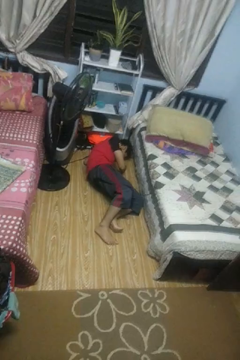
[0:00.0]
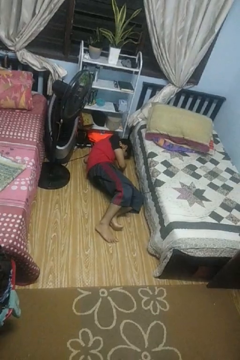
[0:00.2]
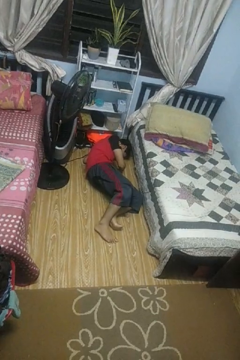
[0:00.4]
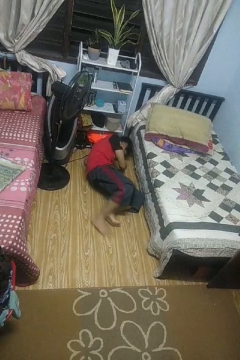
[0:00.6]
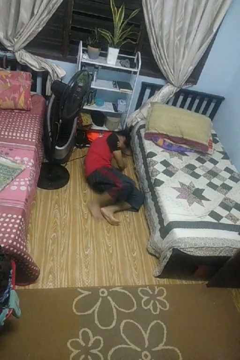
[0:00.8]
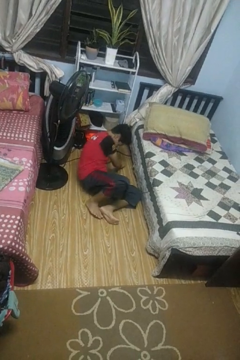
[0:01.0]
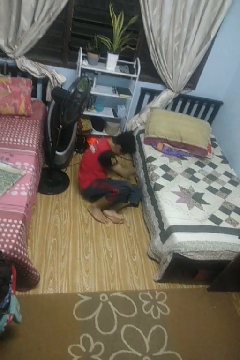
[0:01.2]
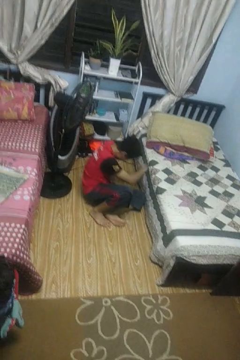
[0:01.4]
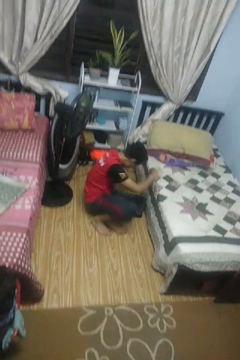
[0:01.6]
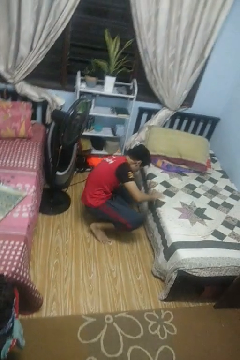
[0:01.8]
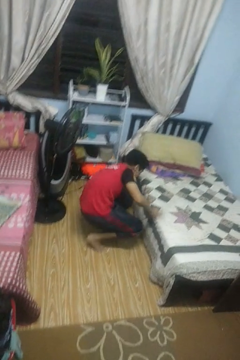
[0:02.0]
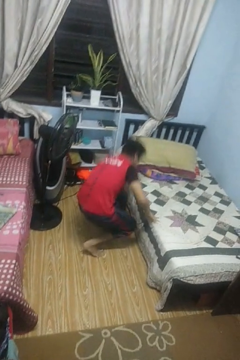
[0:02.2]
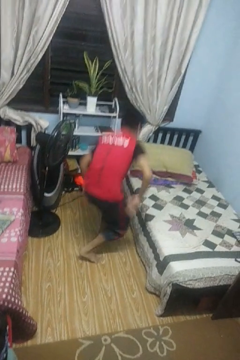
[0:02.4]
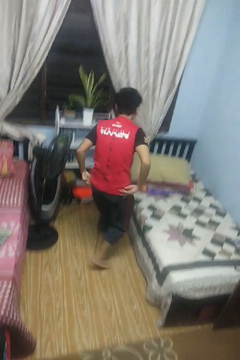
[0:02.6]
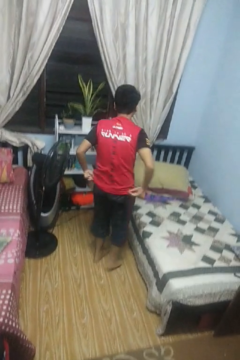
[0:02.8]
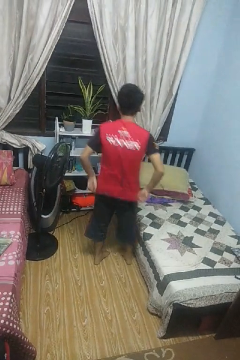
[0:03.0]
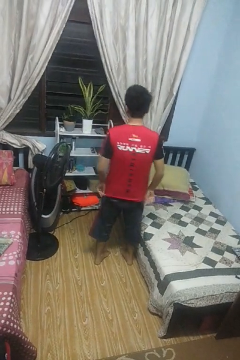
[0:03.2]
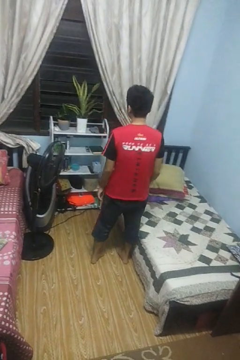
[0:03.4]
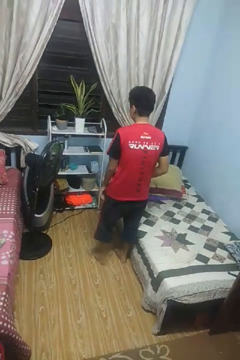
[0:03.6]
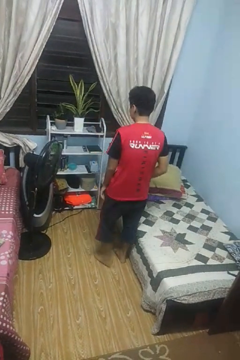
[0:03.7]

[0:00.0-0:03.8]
person stands up from floor

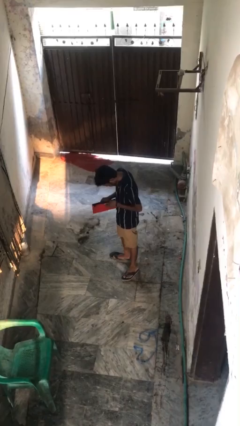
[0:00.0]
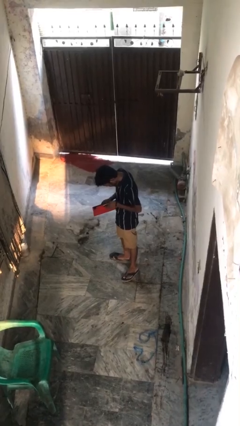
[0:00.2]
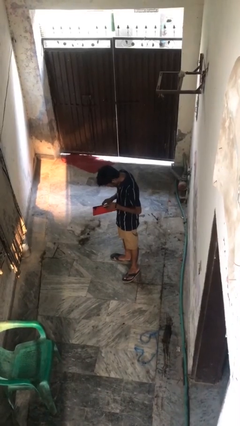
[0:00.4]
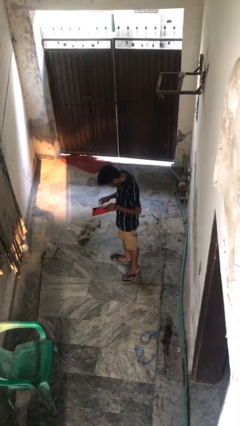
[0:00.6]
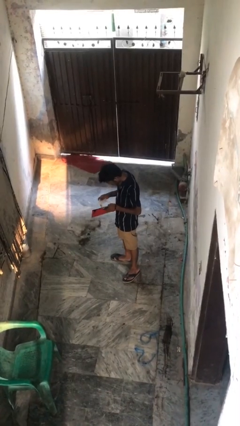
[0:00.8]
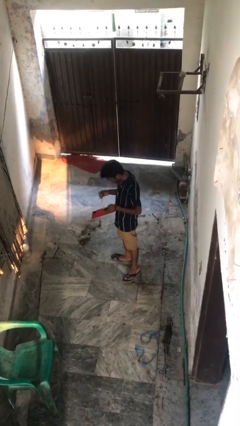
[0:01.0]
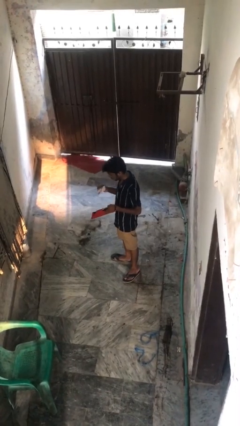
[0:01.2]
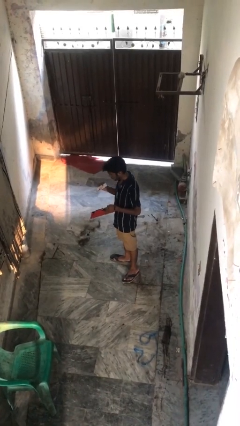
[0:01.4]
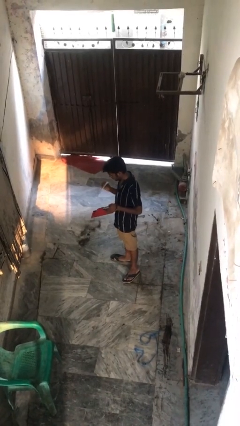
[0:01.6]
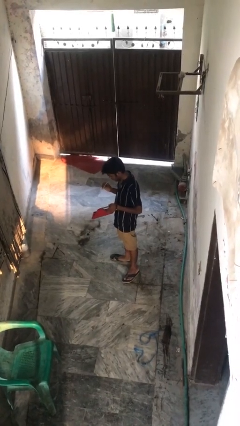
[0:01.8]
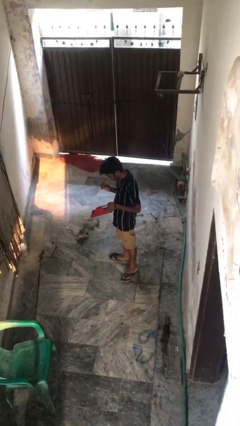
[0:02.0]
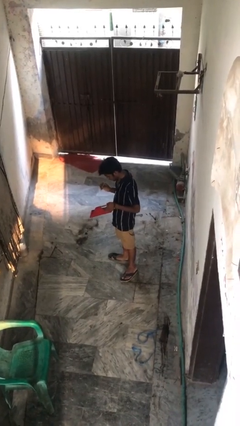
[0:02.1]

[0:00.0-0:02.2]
person takes object from purse

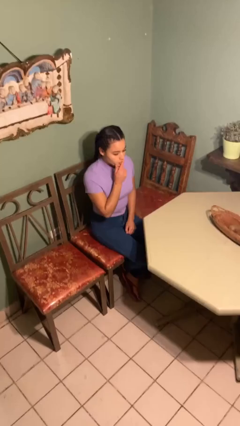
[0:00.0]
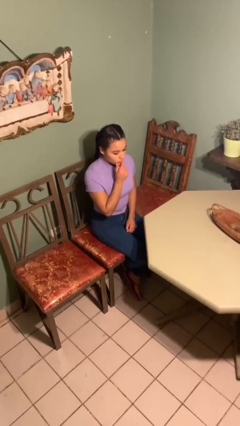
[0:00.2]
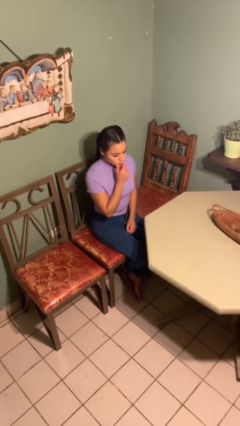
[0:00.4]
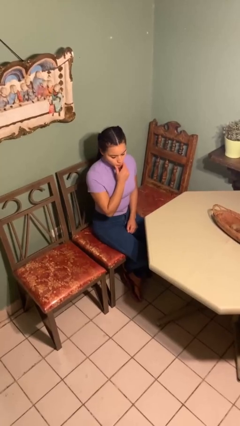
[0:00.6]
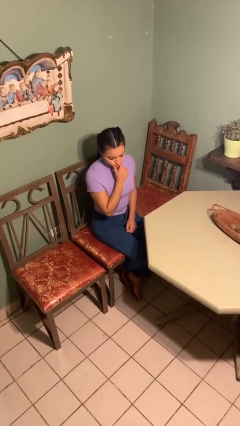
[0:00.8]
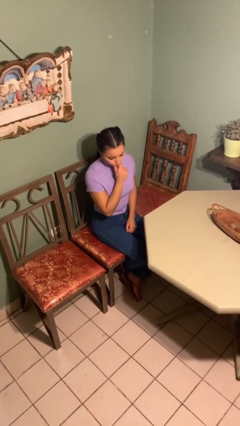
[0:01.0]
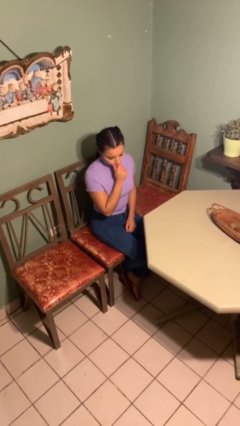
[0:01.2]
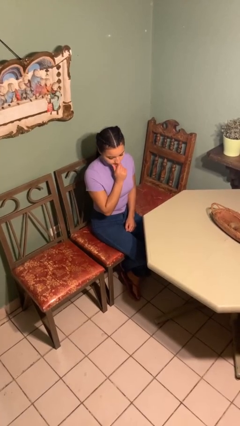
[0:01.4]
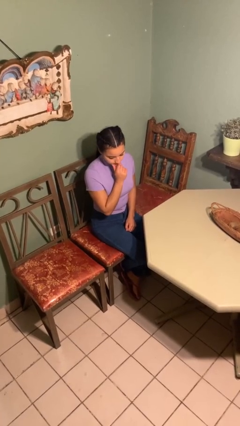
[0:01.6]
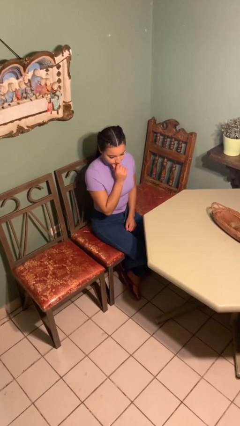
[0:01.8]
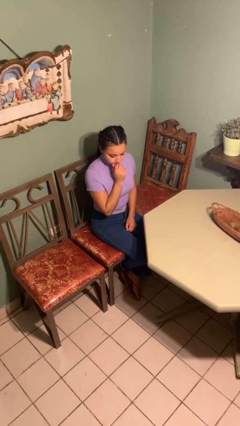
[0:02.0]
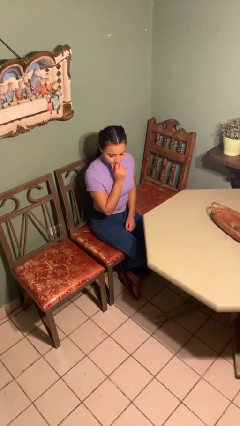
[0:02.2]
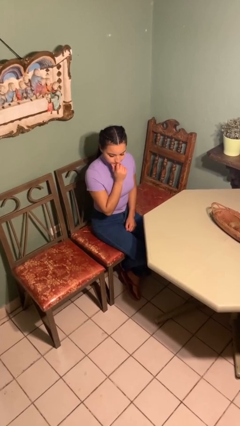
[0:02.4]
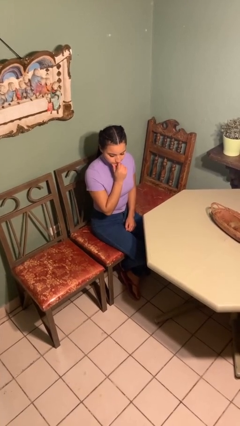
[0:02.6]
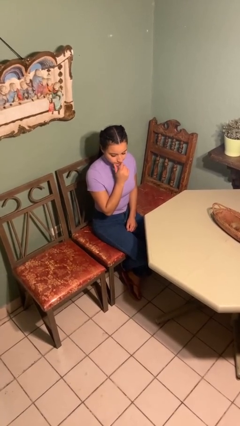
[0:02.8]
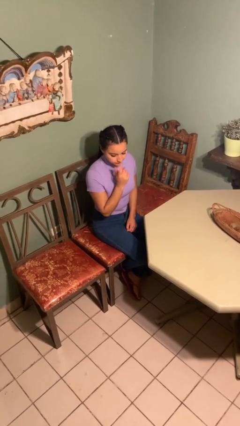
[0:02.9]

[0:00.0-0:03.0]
person strokes chin

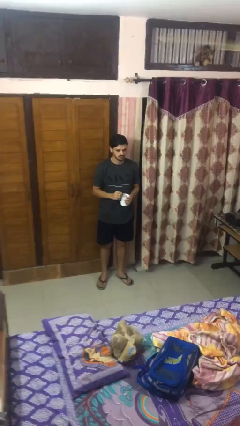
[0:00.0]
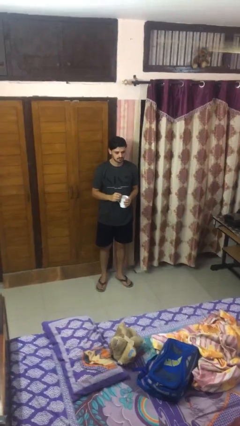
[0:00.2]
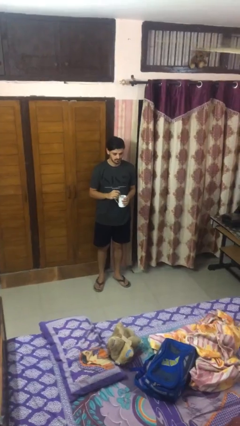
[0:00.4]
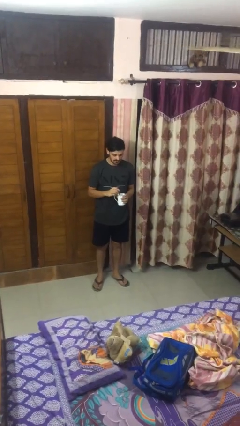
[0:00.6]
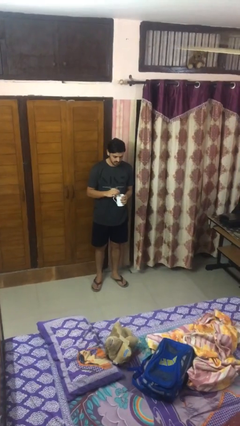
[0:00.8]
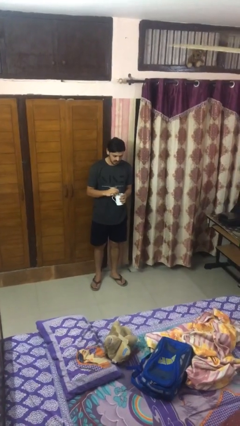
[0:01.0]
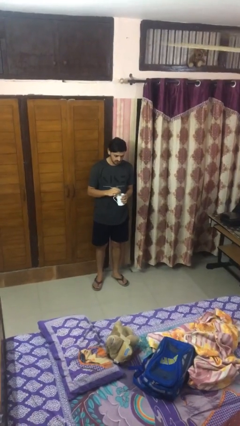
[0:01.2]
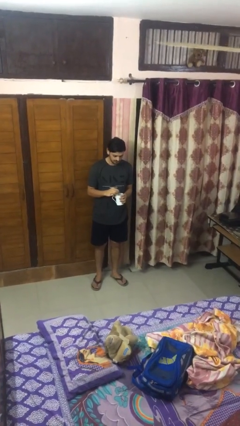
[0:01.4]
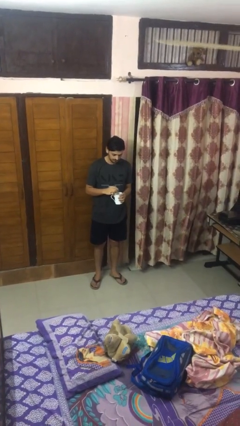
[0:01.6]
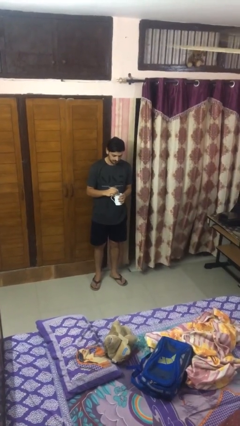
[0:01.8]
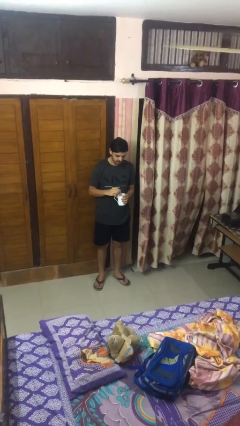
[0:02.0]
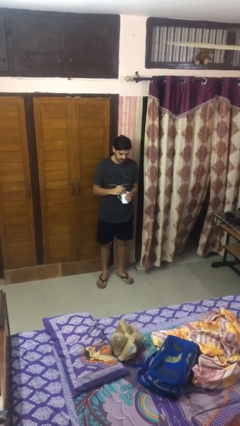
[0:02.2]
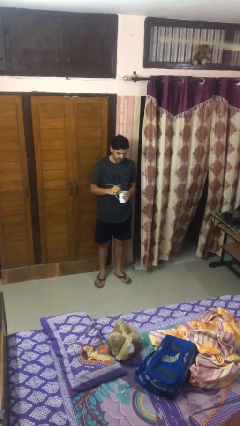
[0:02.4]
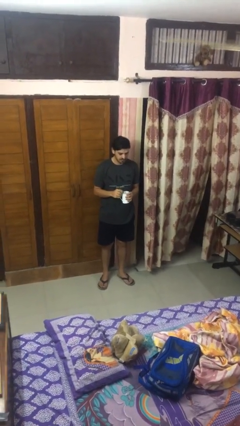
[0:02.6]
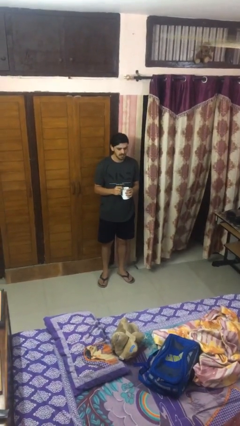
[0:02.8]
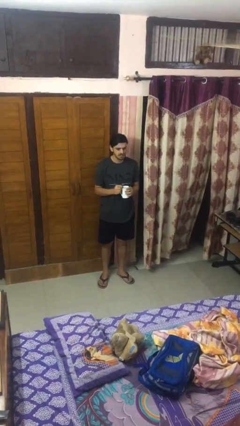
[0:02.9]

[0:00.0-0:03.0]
person stirs mug

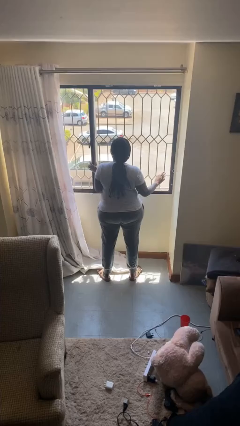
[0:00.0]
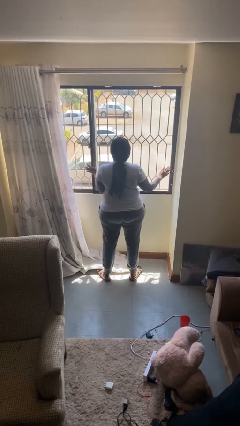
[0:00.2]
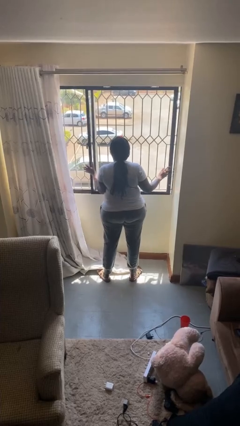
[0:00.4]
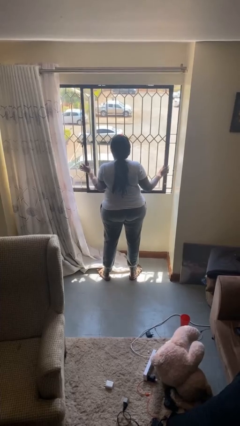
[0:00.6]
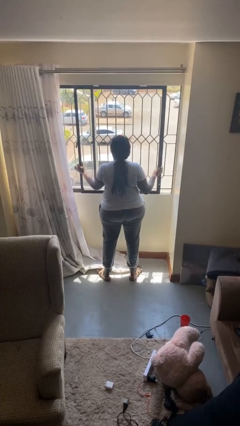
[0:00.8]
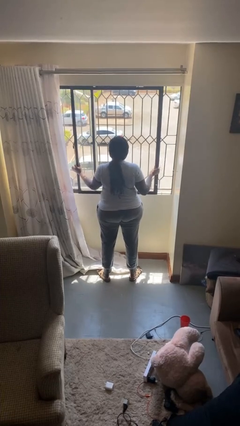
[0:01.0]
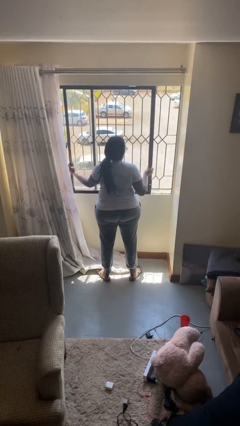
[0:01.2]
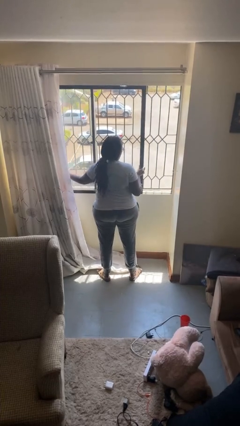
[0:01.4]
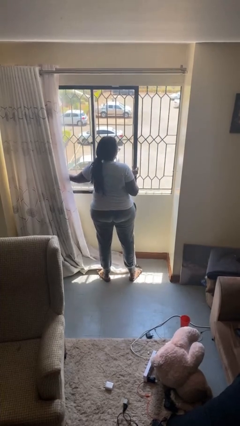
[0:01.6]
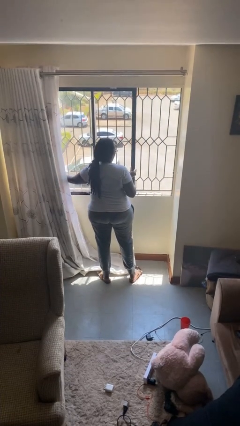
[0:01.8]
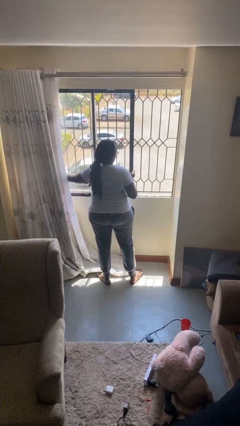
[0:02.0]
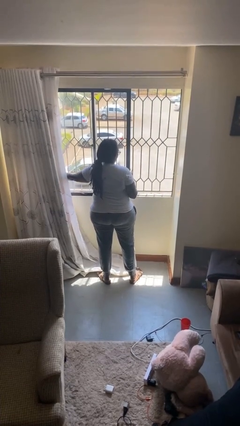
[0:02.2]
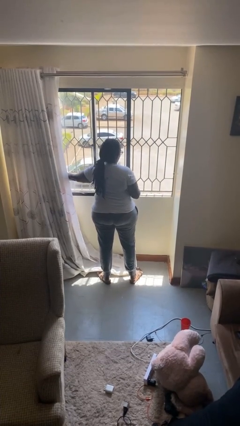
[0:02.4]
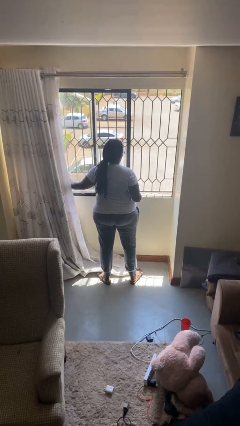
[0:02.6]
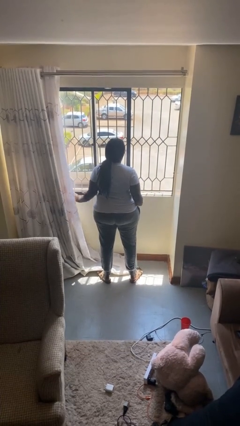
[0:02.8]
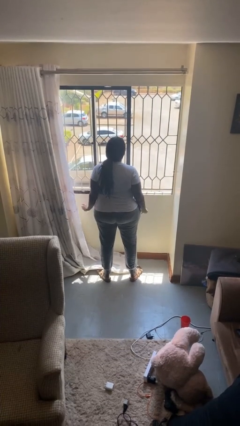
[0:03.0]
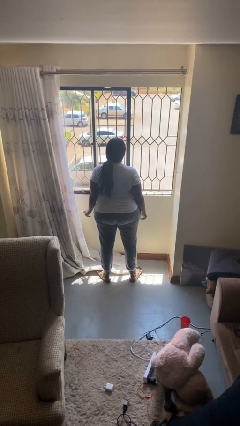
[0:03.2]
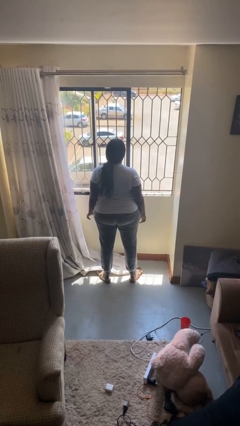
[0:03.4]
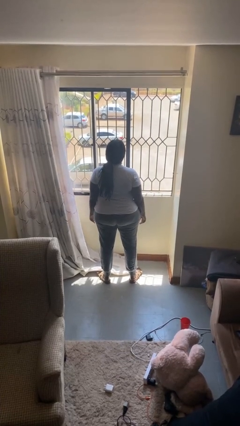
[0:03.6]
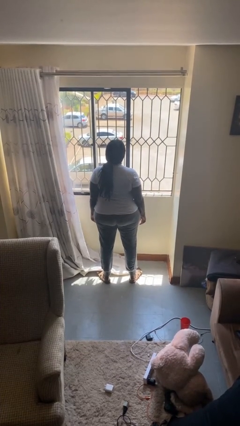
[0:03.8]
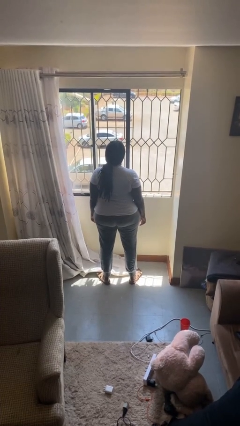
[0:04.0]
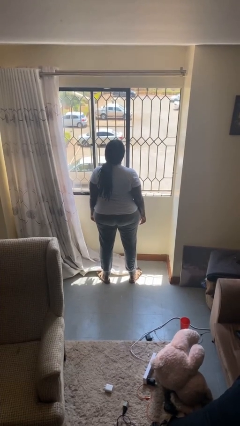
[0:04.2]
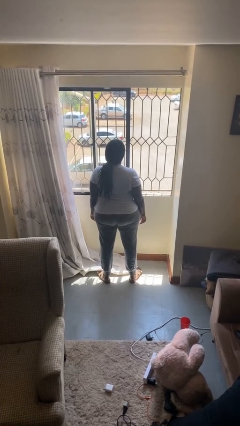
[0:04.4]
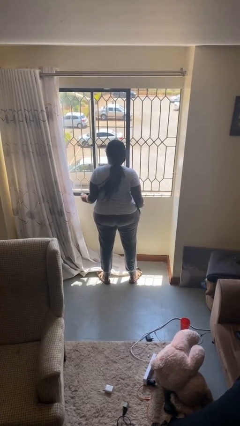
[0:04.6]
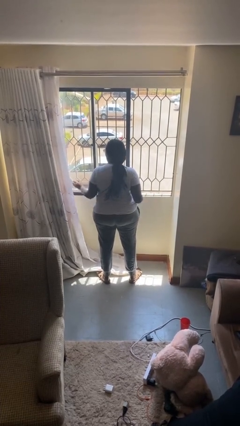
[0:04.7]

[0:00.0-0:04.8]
person opens home window

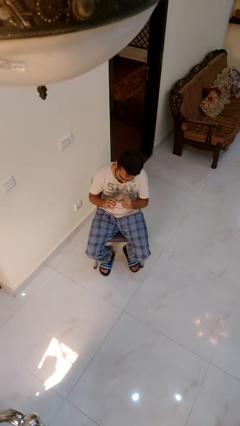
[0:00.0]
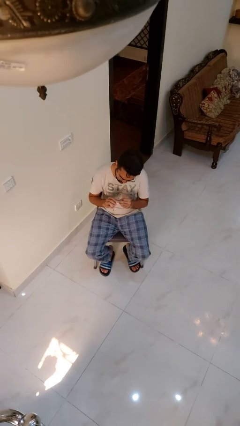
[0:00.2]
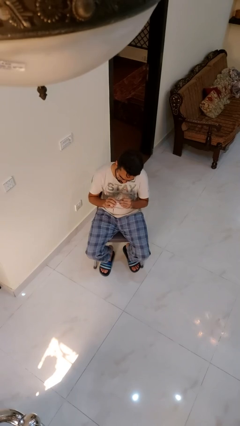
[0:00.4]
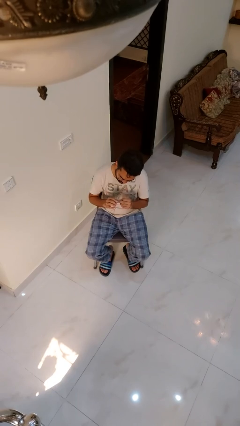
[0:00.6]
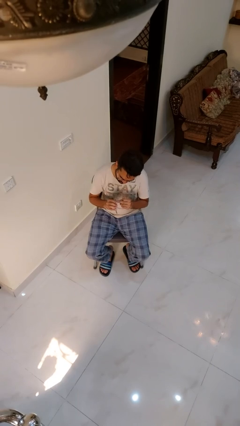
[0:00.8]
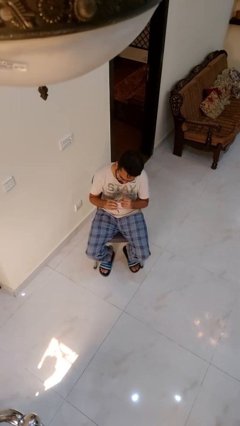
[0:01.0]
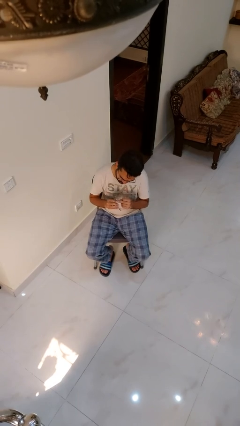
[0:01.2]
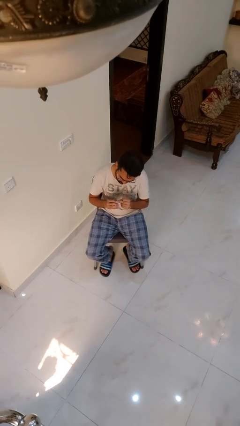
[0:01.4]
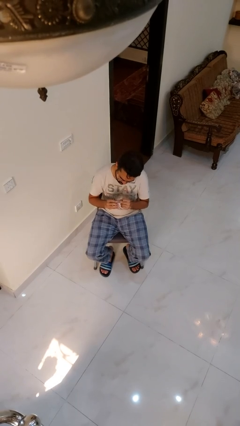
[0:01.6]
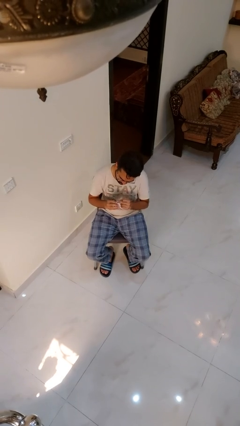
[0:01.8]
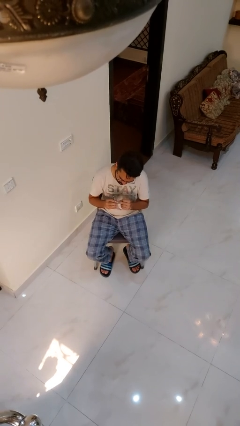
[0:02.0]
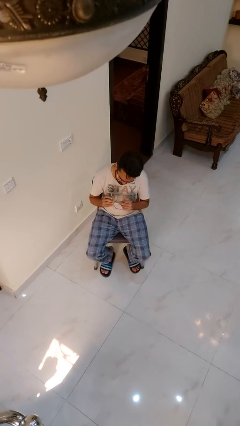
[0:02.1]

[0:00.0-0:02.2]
person files fingernails
